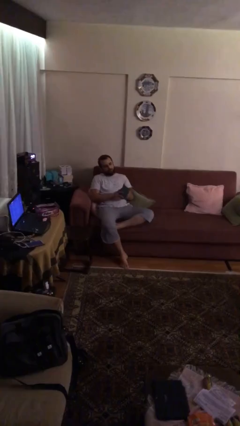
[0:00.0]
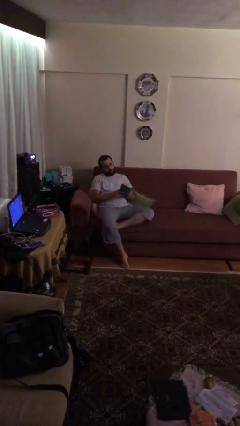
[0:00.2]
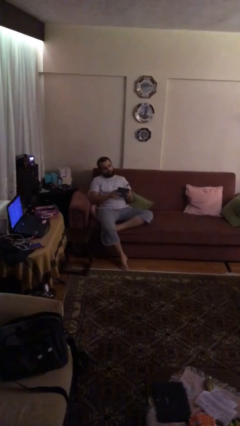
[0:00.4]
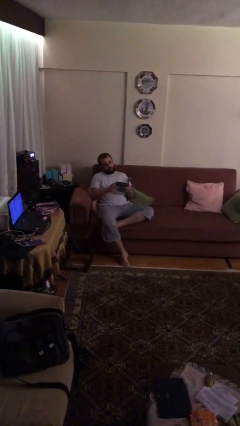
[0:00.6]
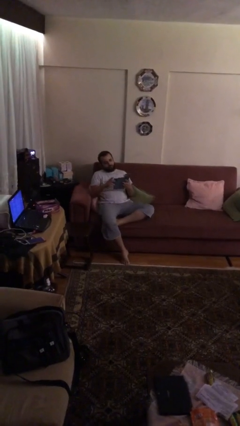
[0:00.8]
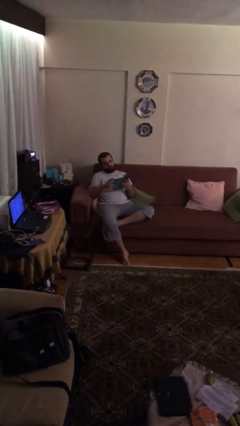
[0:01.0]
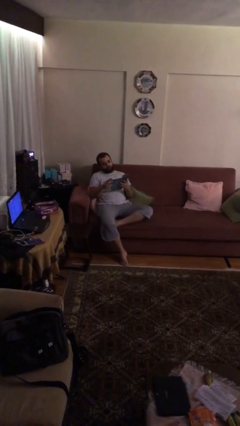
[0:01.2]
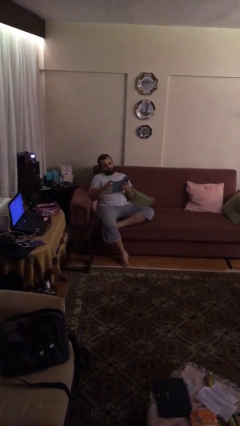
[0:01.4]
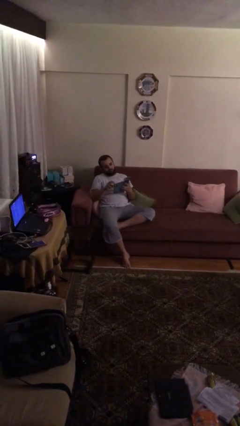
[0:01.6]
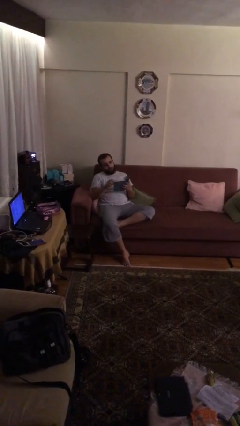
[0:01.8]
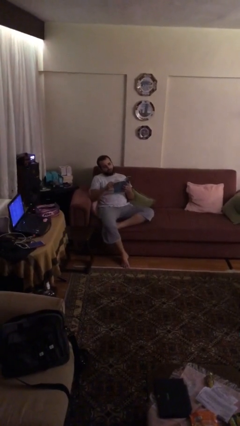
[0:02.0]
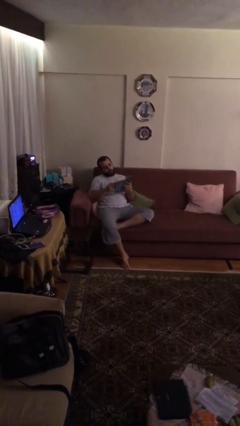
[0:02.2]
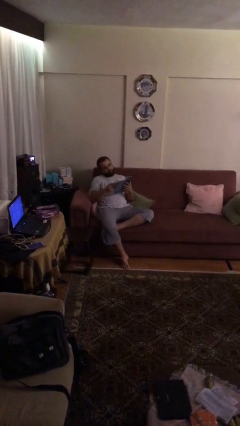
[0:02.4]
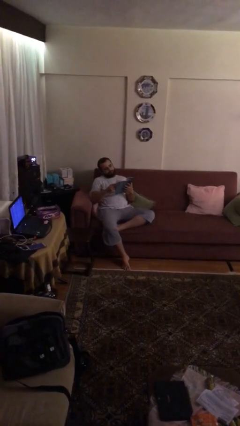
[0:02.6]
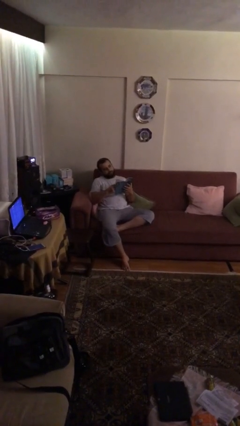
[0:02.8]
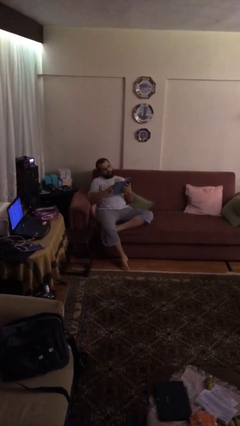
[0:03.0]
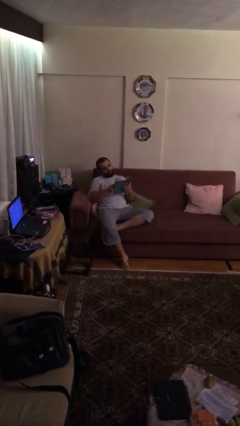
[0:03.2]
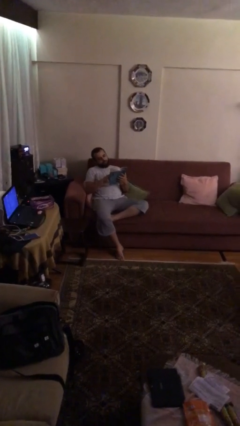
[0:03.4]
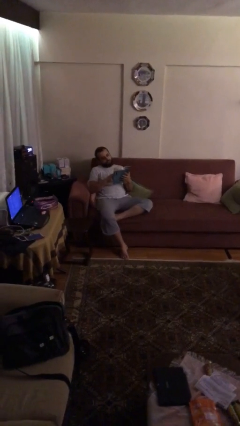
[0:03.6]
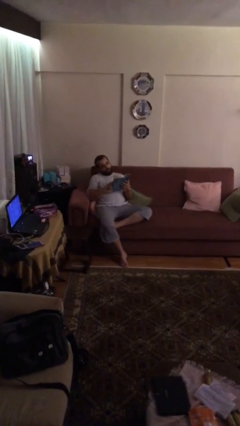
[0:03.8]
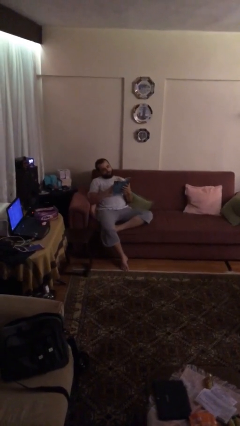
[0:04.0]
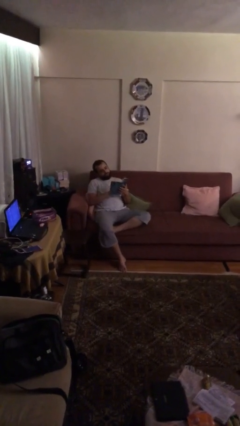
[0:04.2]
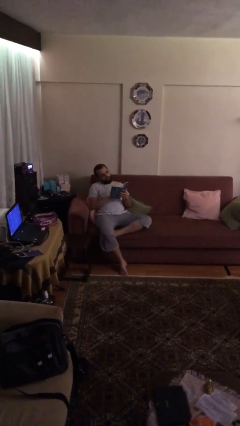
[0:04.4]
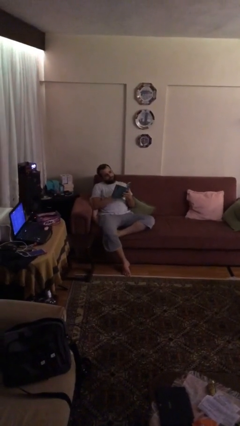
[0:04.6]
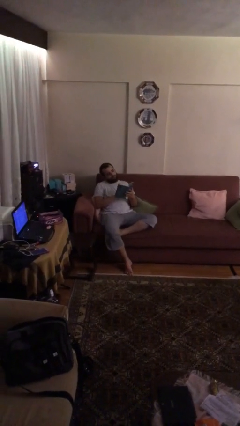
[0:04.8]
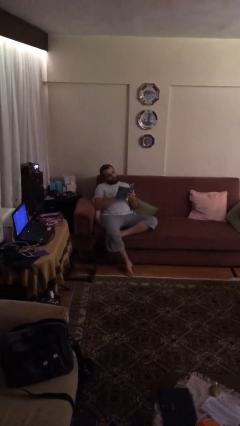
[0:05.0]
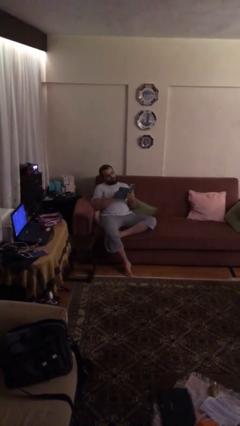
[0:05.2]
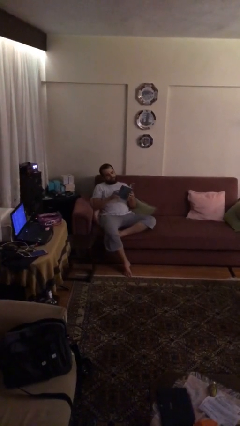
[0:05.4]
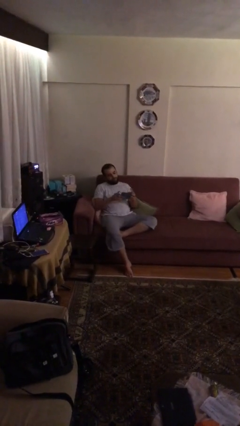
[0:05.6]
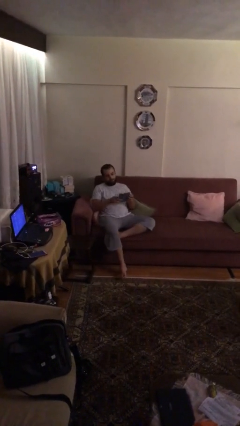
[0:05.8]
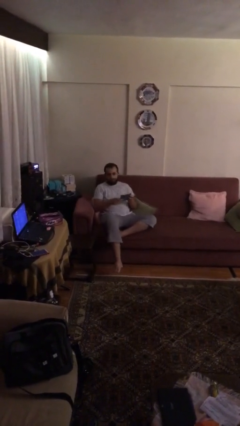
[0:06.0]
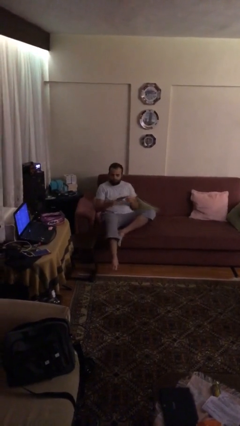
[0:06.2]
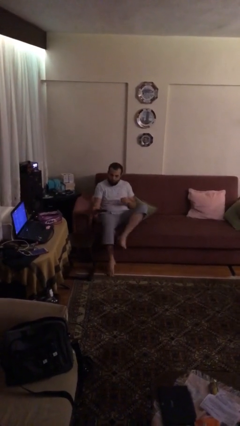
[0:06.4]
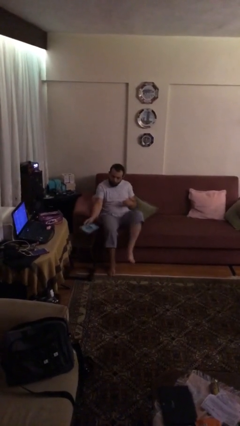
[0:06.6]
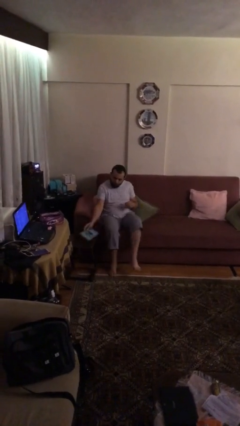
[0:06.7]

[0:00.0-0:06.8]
person reads document

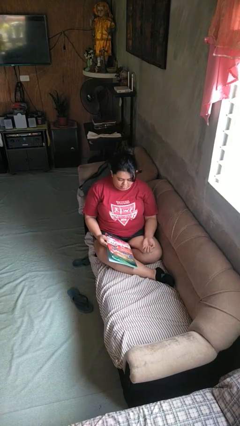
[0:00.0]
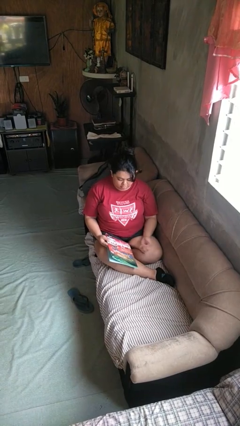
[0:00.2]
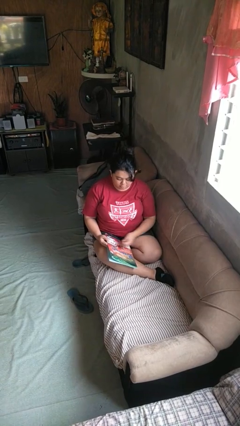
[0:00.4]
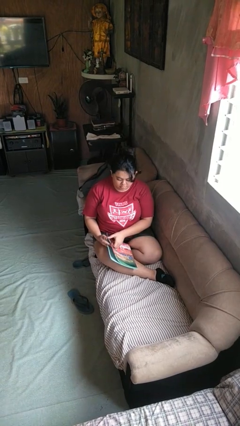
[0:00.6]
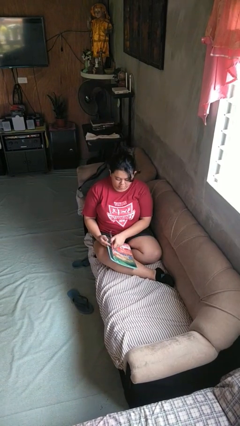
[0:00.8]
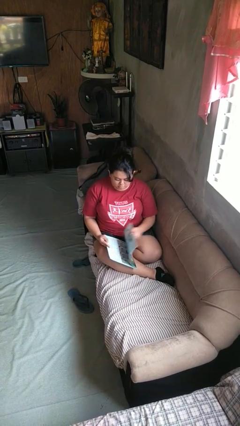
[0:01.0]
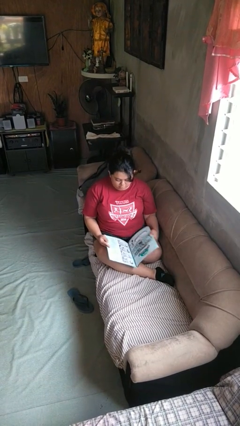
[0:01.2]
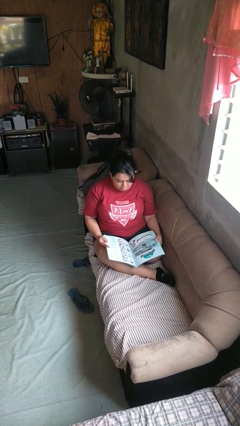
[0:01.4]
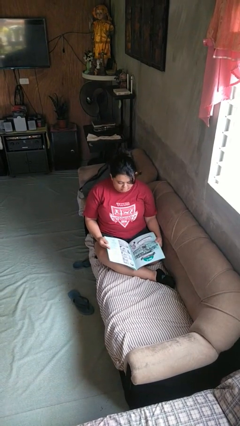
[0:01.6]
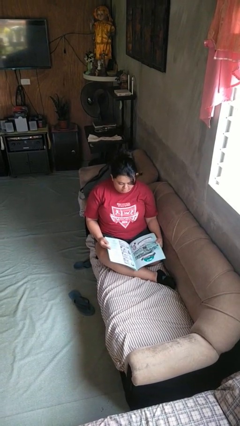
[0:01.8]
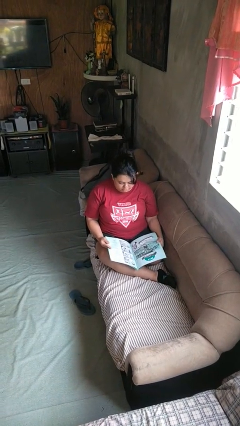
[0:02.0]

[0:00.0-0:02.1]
person reads magazine

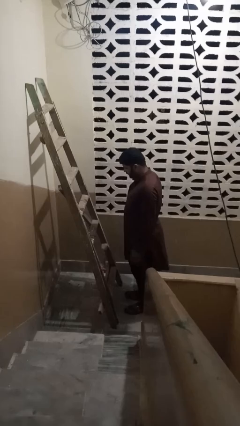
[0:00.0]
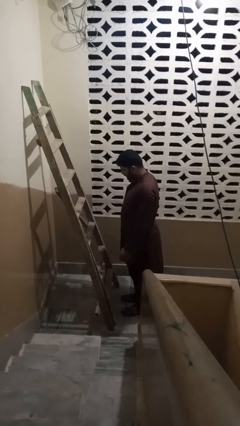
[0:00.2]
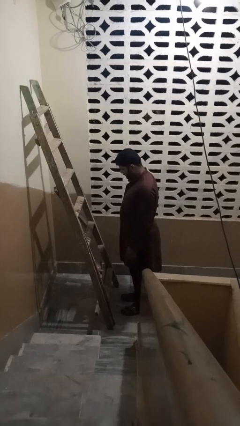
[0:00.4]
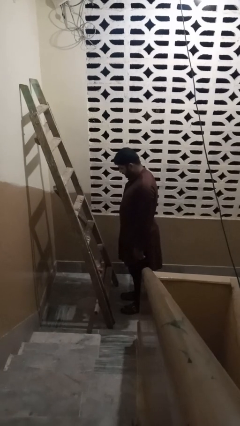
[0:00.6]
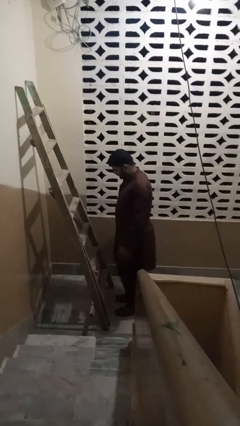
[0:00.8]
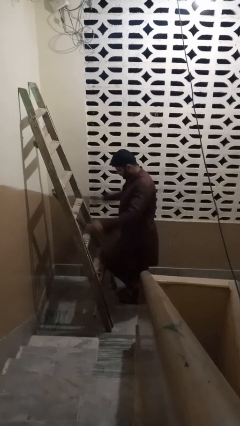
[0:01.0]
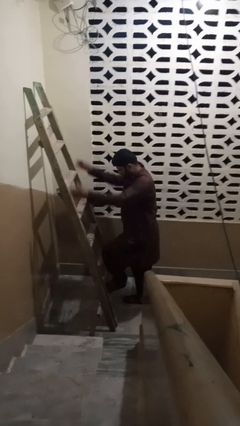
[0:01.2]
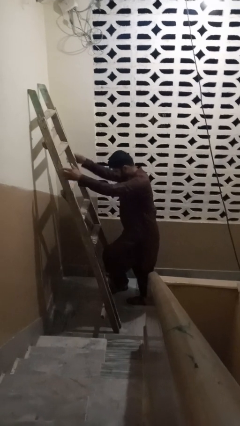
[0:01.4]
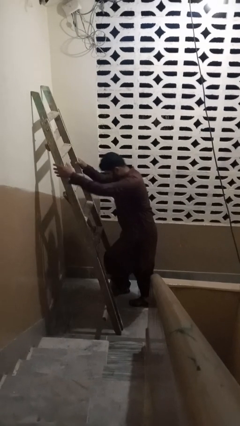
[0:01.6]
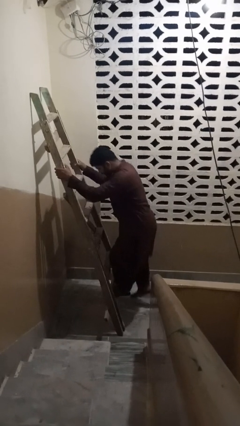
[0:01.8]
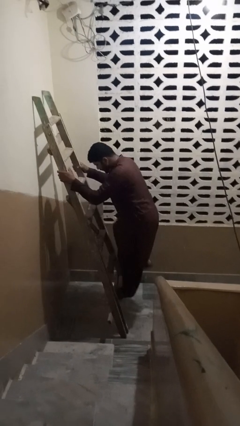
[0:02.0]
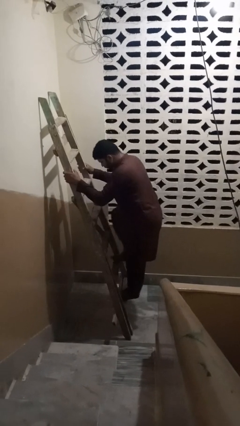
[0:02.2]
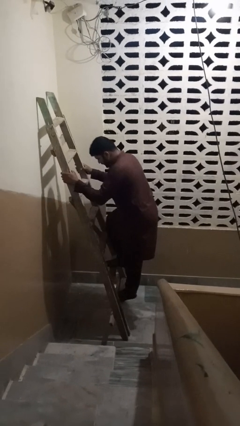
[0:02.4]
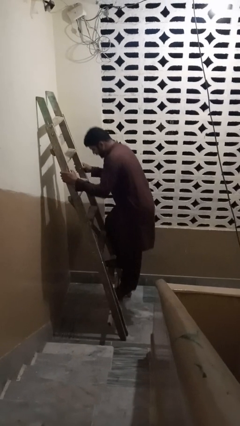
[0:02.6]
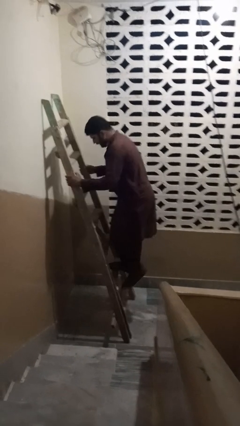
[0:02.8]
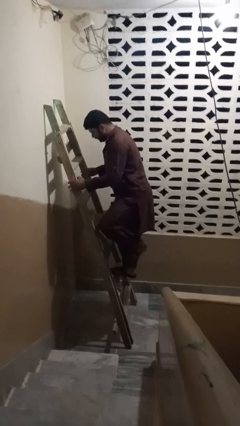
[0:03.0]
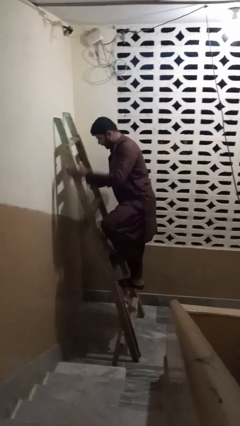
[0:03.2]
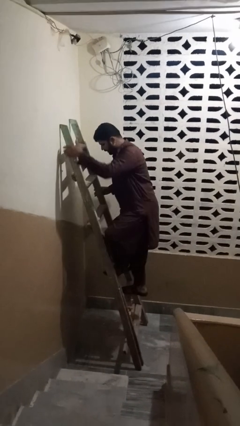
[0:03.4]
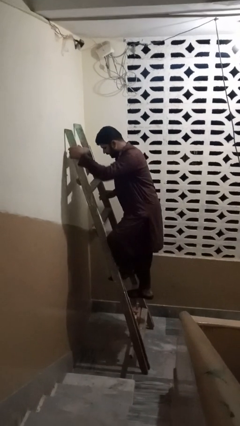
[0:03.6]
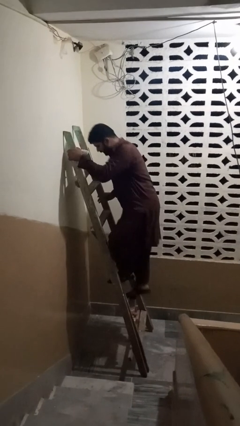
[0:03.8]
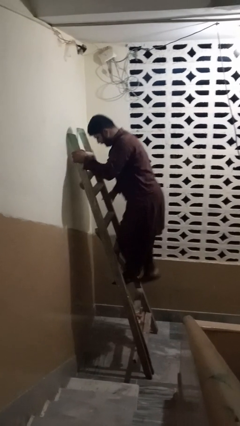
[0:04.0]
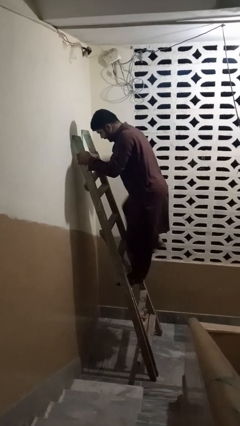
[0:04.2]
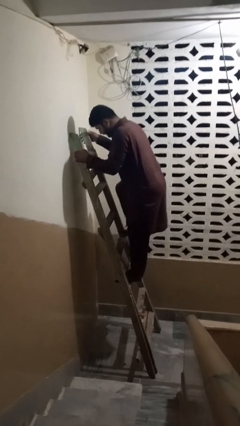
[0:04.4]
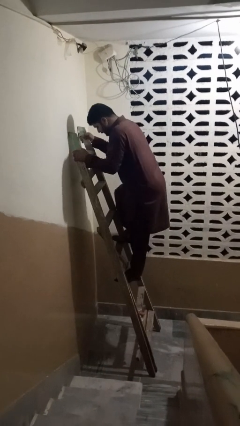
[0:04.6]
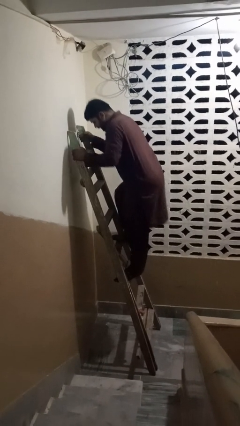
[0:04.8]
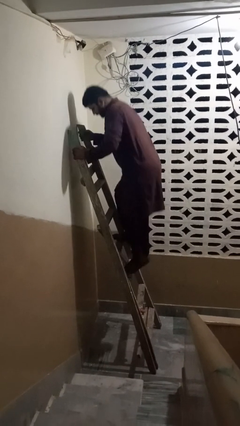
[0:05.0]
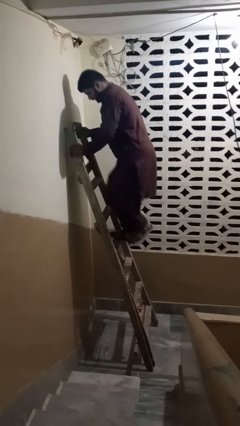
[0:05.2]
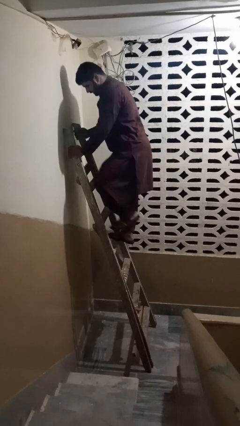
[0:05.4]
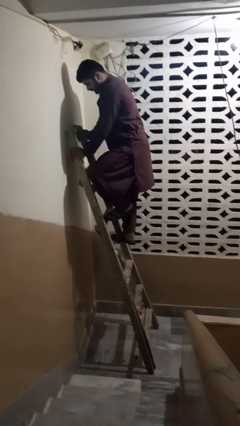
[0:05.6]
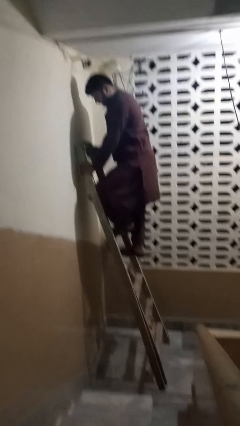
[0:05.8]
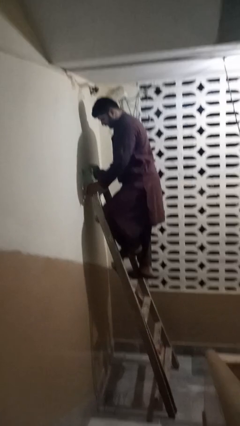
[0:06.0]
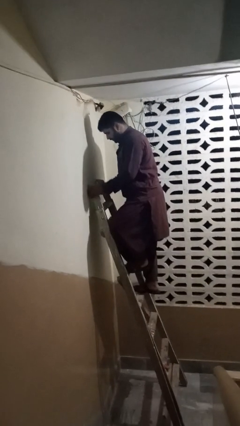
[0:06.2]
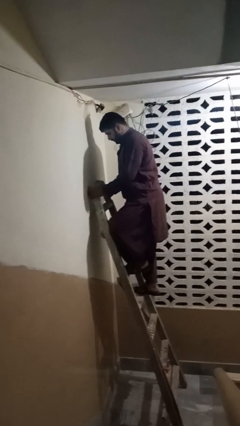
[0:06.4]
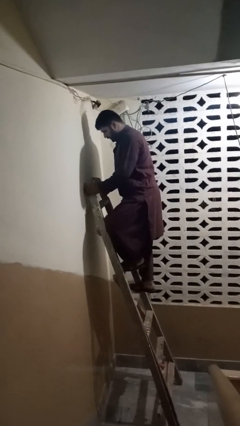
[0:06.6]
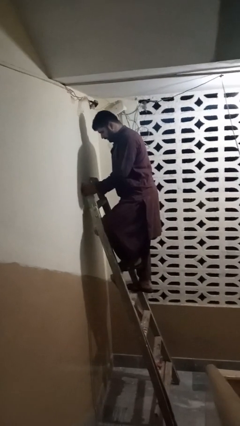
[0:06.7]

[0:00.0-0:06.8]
person climbs up ladder

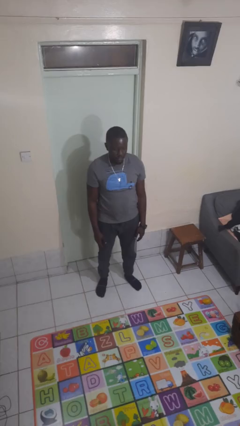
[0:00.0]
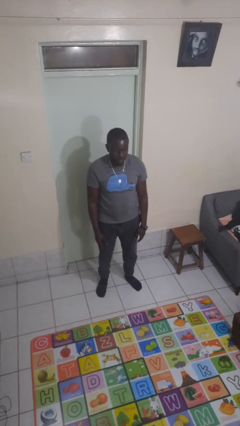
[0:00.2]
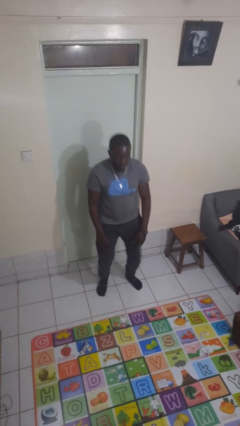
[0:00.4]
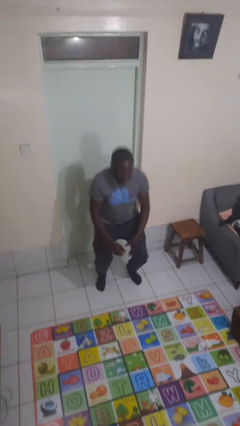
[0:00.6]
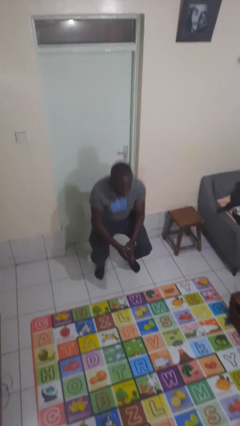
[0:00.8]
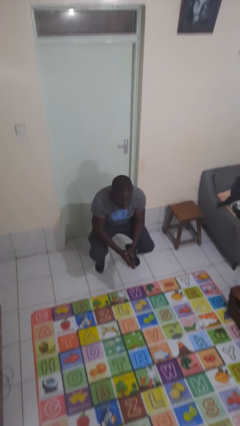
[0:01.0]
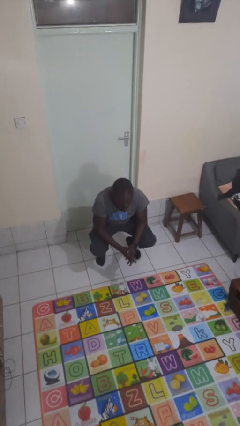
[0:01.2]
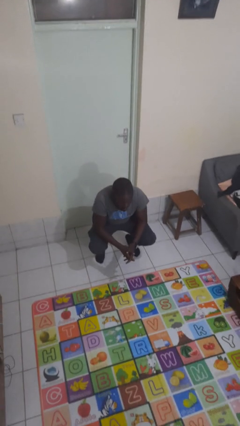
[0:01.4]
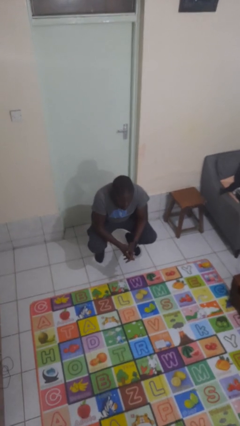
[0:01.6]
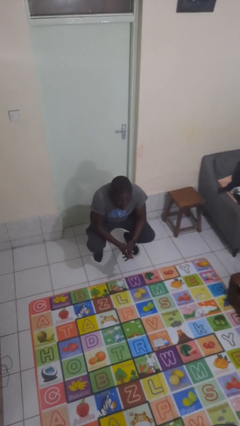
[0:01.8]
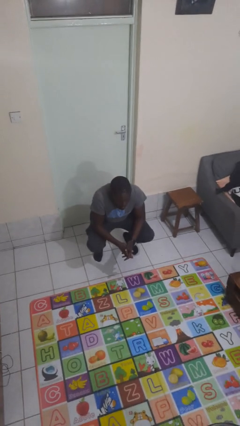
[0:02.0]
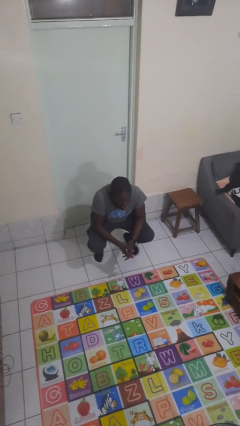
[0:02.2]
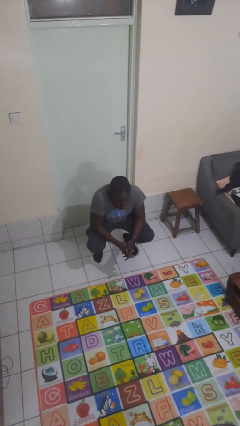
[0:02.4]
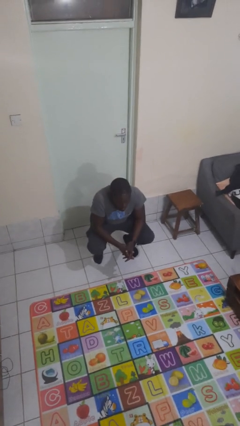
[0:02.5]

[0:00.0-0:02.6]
person squats
